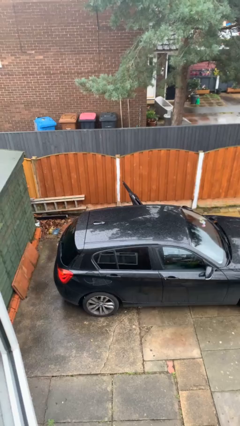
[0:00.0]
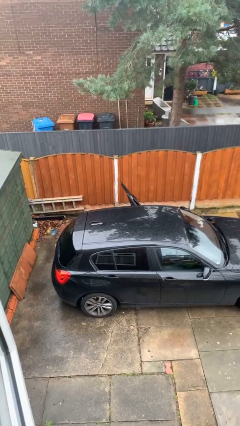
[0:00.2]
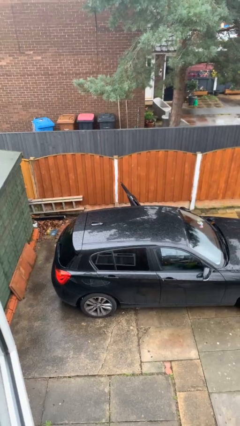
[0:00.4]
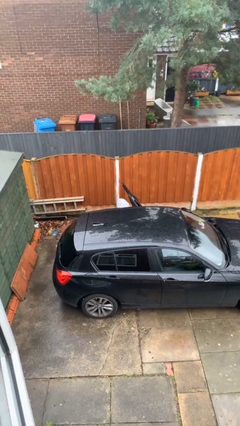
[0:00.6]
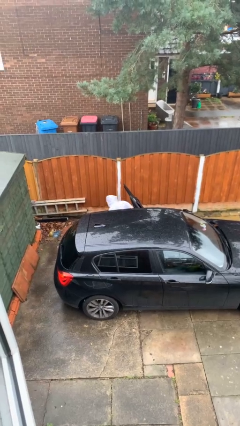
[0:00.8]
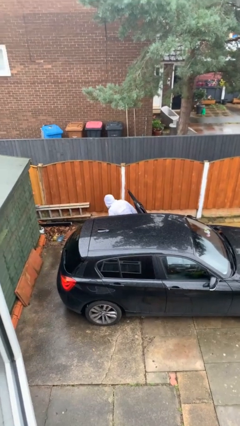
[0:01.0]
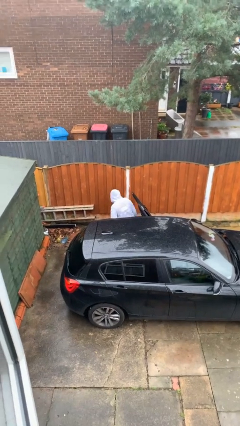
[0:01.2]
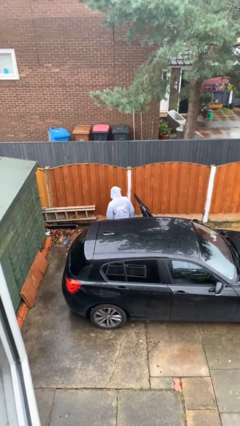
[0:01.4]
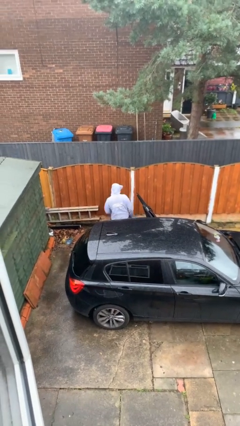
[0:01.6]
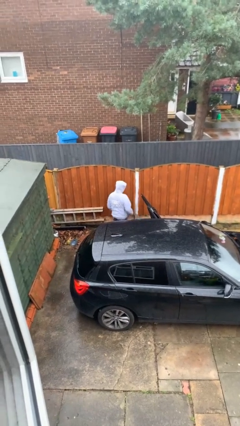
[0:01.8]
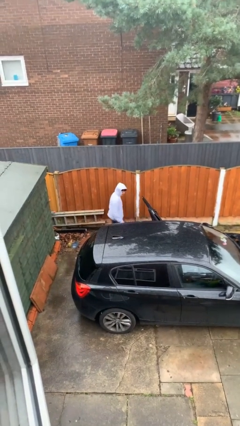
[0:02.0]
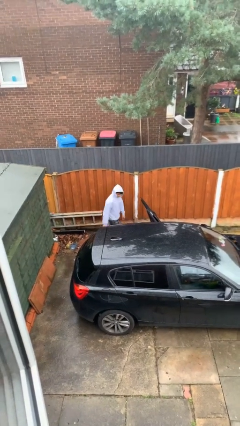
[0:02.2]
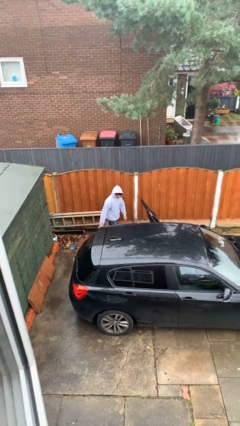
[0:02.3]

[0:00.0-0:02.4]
person exits car

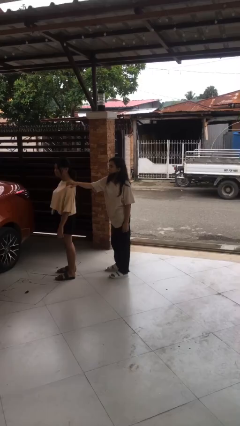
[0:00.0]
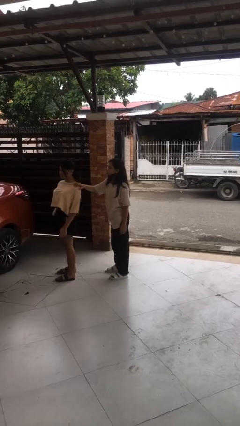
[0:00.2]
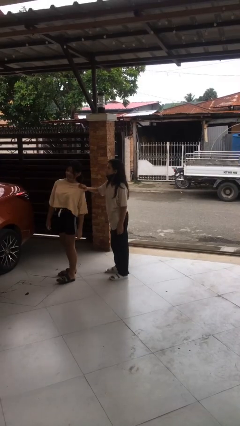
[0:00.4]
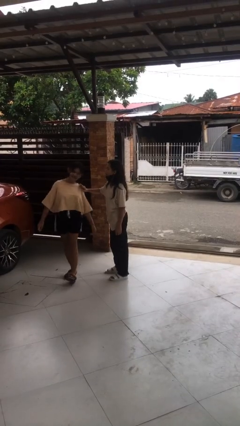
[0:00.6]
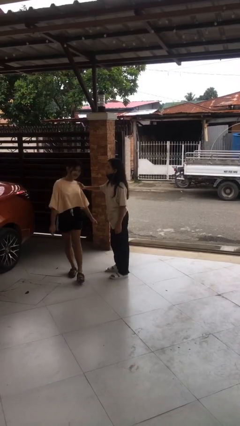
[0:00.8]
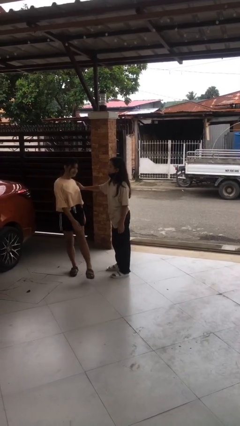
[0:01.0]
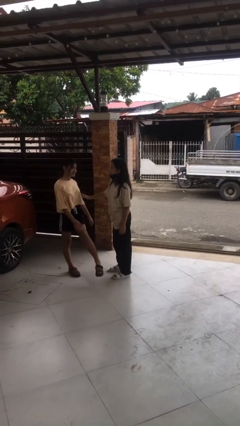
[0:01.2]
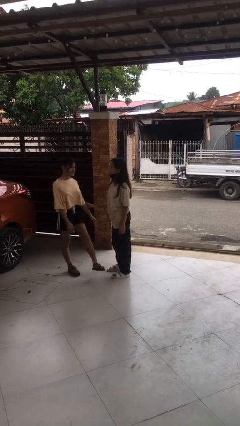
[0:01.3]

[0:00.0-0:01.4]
person spins person around

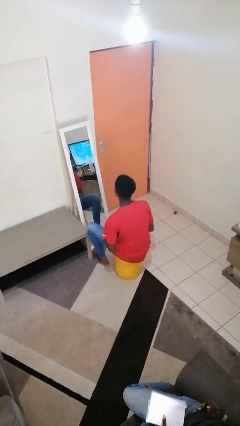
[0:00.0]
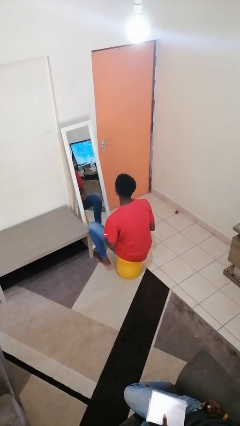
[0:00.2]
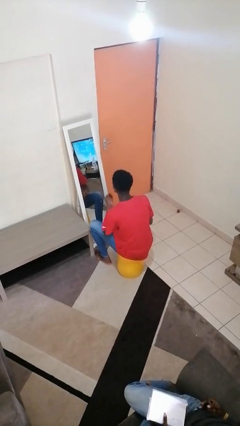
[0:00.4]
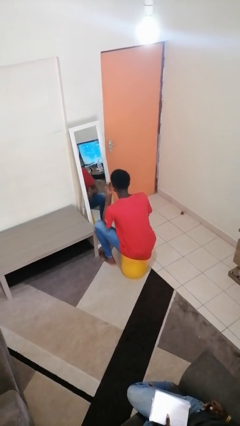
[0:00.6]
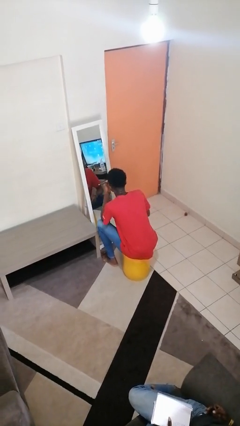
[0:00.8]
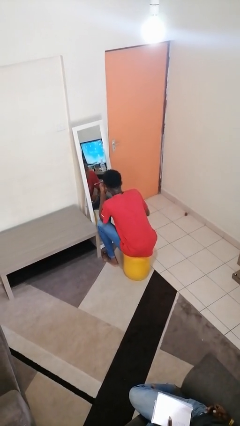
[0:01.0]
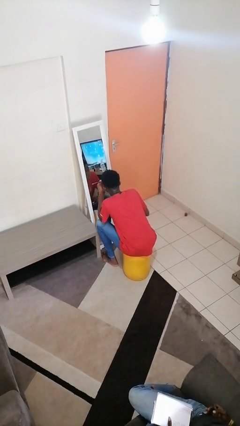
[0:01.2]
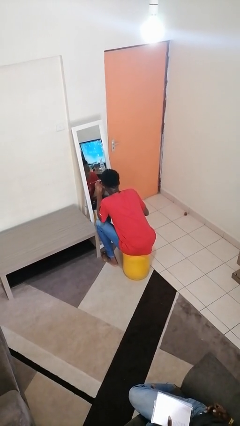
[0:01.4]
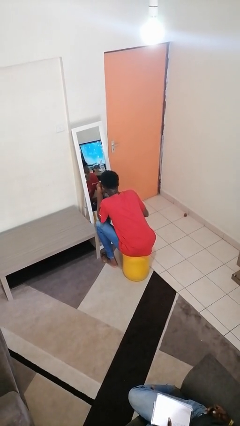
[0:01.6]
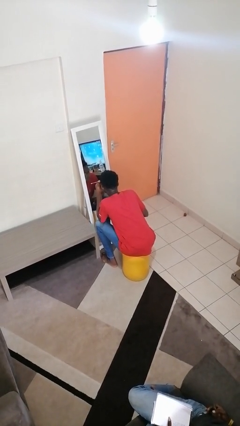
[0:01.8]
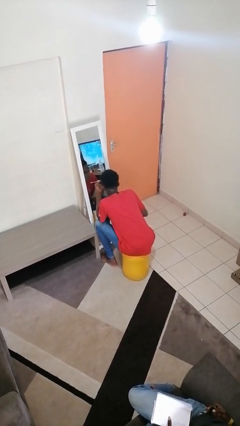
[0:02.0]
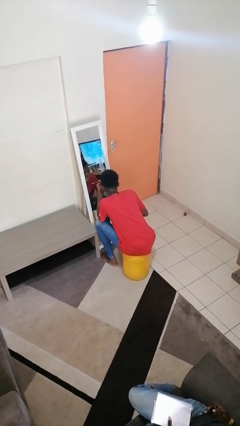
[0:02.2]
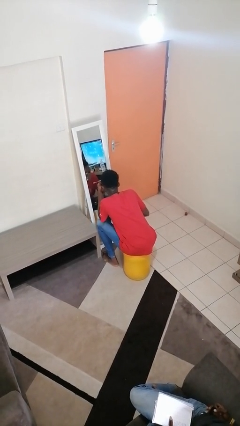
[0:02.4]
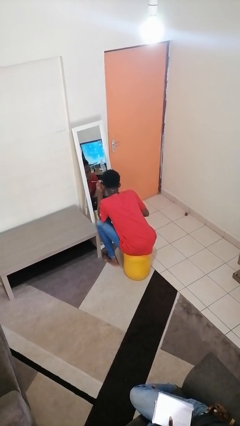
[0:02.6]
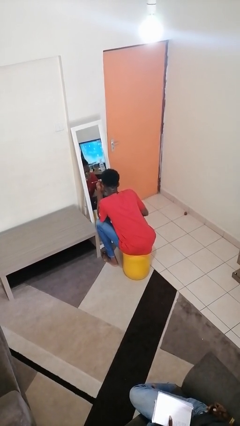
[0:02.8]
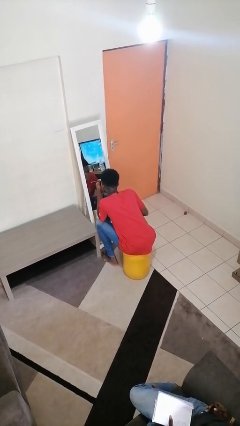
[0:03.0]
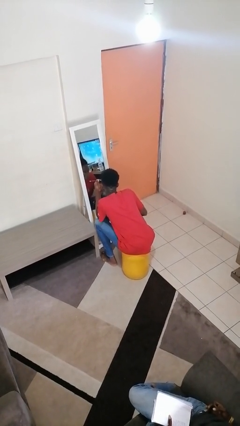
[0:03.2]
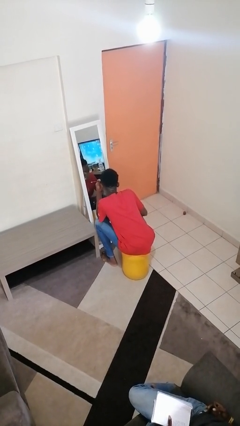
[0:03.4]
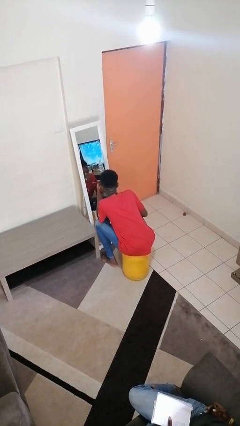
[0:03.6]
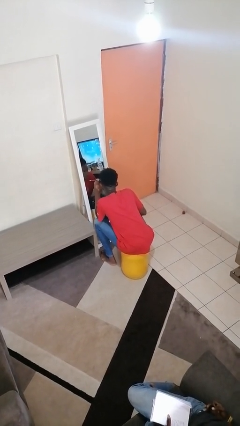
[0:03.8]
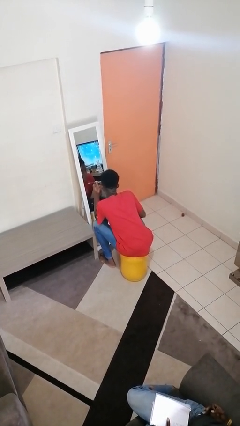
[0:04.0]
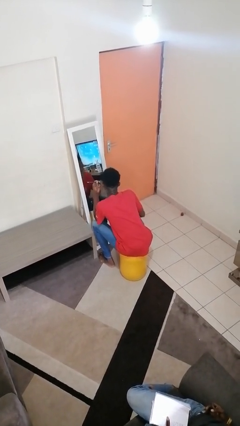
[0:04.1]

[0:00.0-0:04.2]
person applies eye makeup

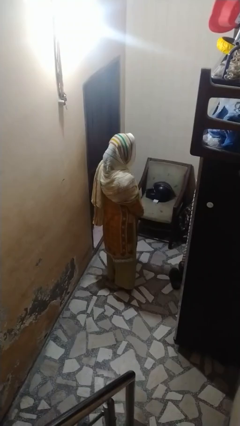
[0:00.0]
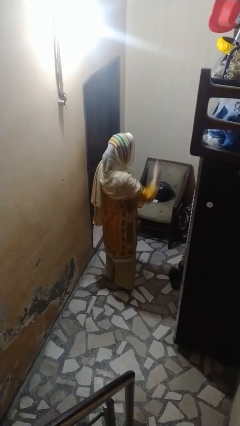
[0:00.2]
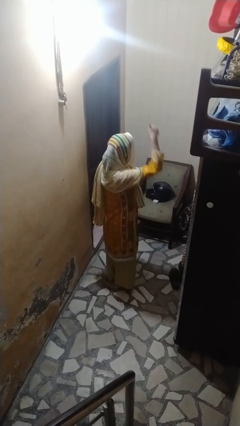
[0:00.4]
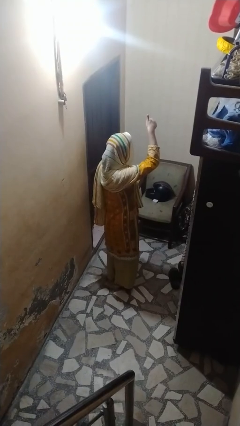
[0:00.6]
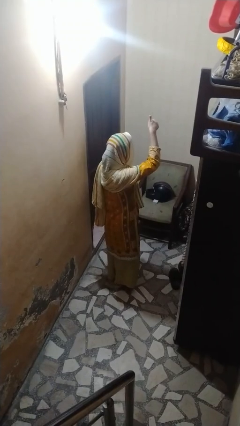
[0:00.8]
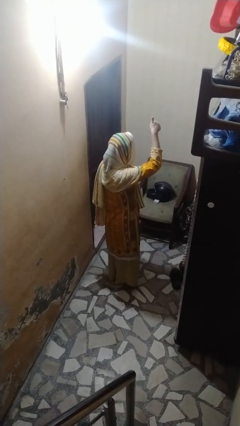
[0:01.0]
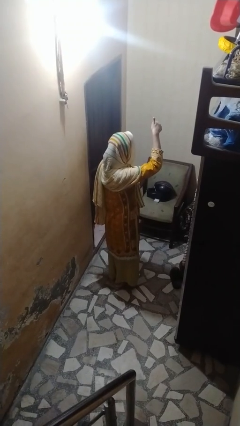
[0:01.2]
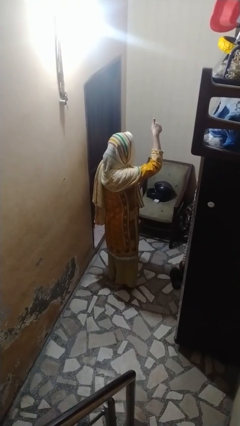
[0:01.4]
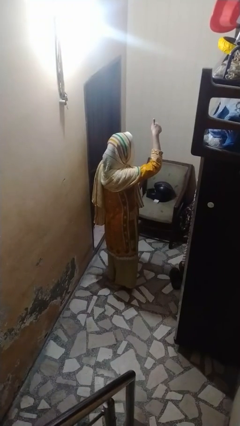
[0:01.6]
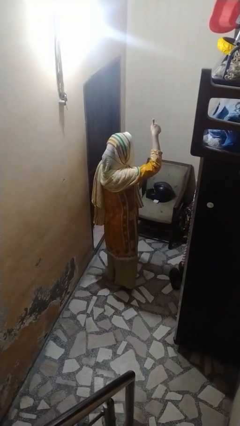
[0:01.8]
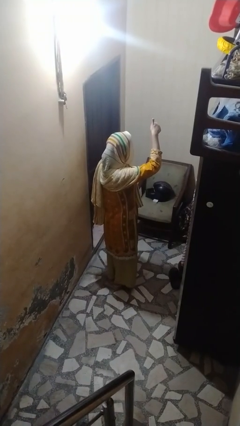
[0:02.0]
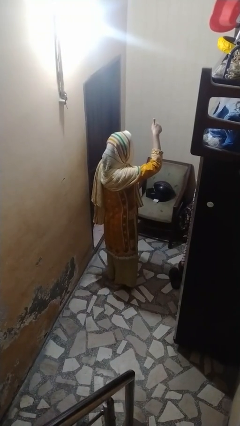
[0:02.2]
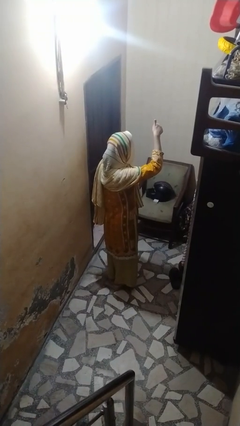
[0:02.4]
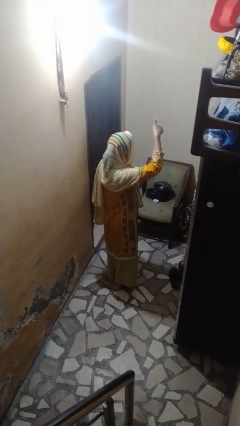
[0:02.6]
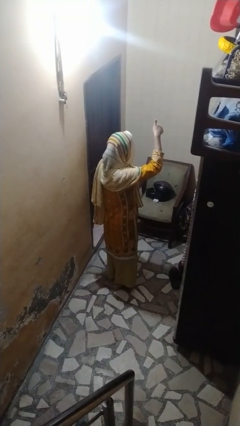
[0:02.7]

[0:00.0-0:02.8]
person gestures thumbs up

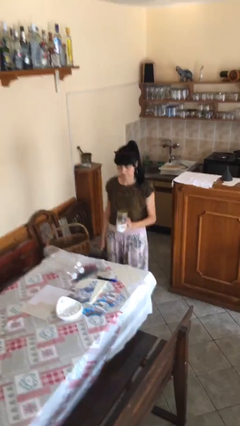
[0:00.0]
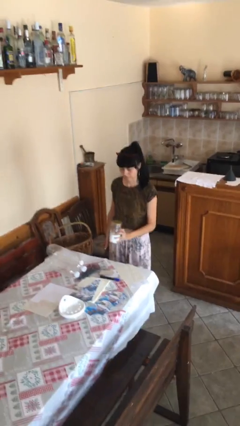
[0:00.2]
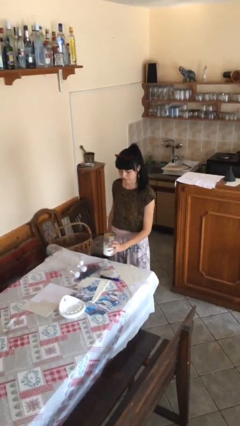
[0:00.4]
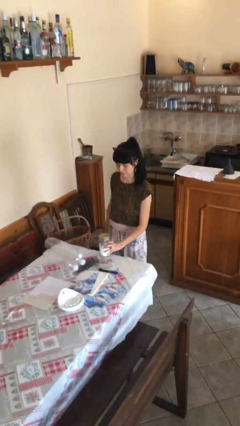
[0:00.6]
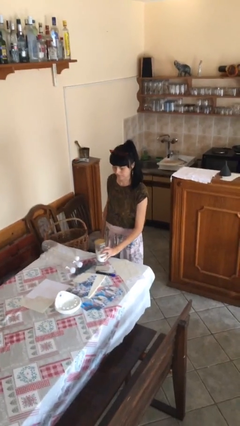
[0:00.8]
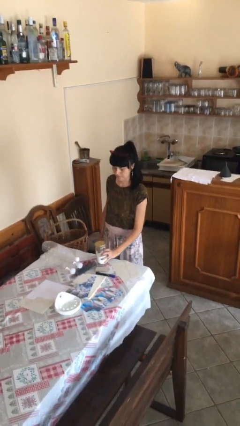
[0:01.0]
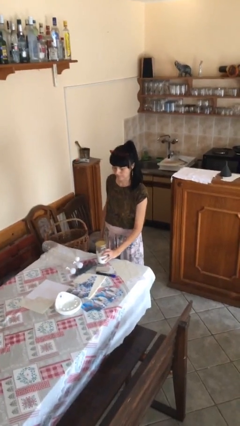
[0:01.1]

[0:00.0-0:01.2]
person puts down object on table

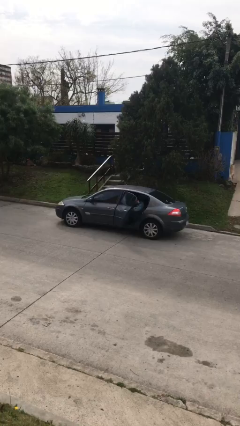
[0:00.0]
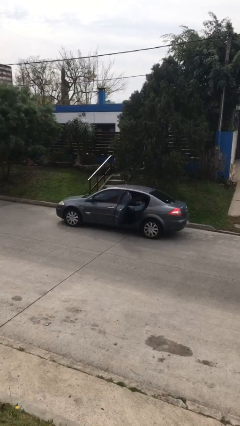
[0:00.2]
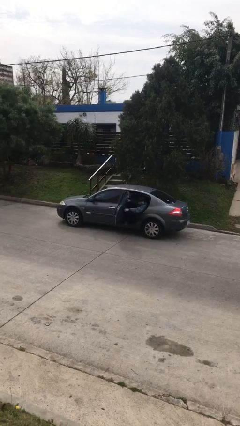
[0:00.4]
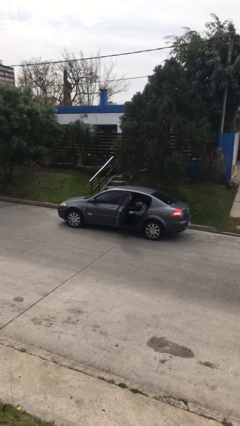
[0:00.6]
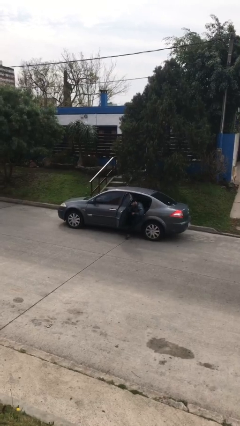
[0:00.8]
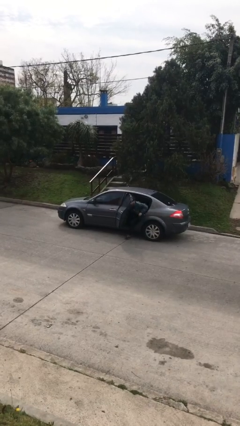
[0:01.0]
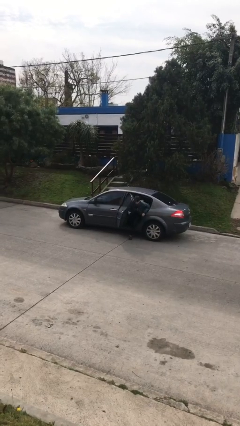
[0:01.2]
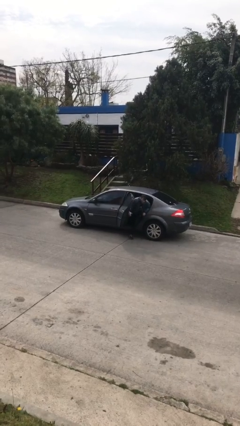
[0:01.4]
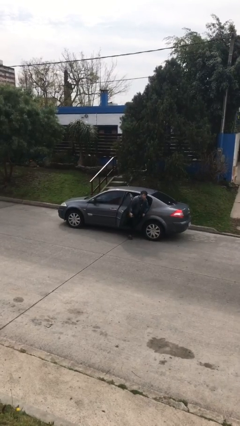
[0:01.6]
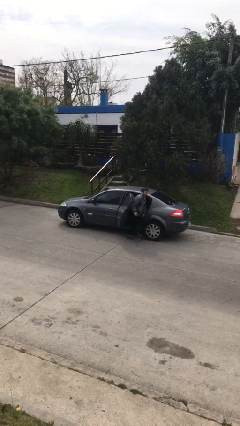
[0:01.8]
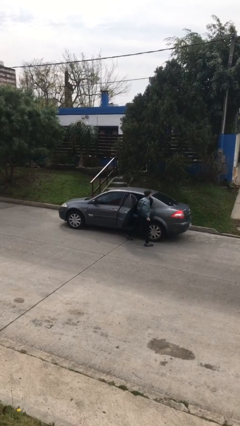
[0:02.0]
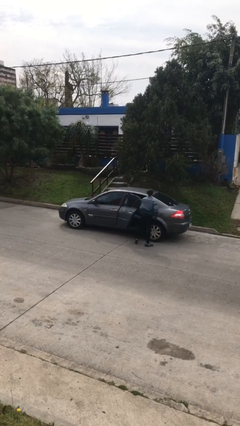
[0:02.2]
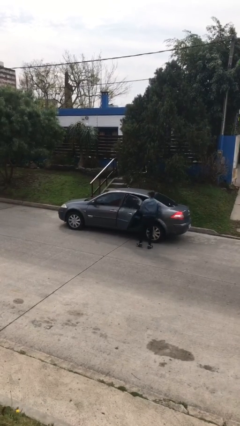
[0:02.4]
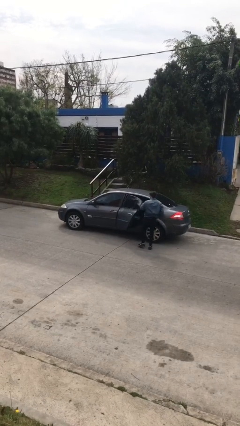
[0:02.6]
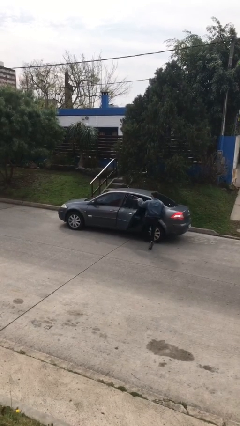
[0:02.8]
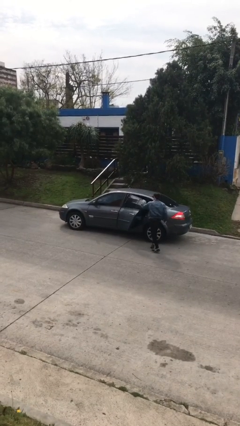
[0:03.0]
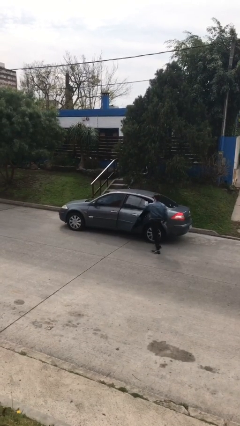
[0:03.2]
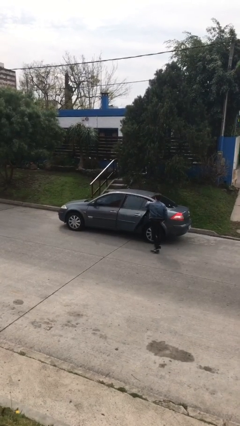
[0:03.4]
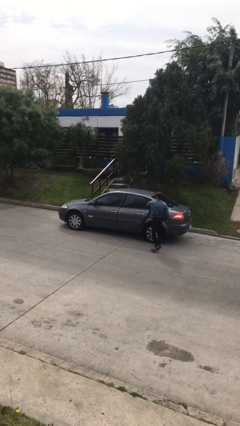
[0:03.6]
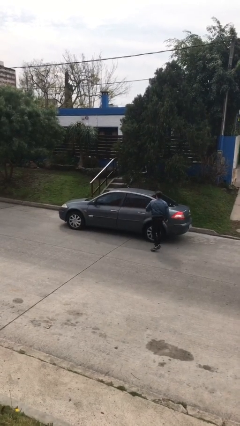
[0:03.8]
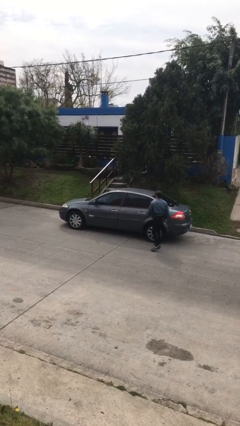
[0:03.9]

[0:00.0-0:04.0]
car drops off person

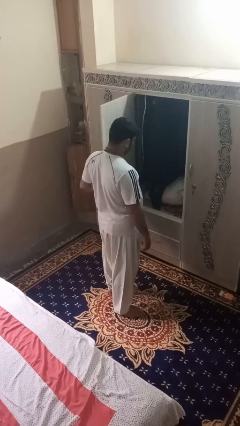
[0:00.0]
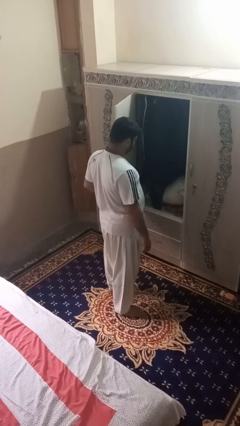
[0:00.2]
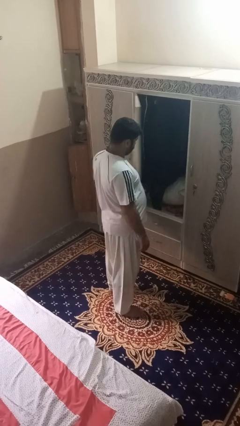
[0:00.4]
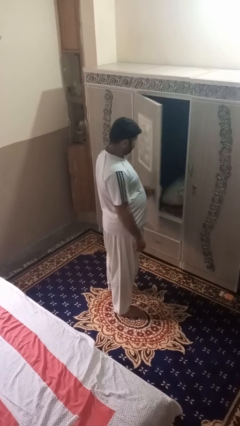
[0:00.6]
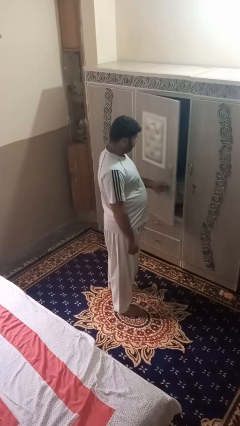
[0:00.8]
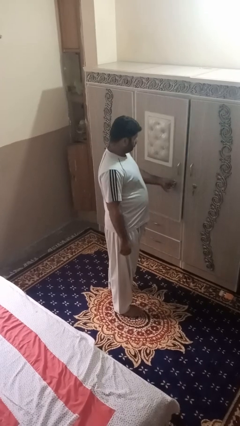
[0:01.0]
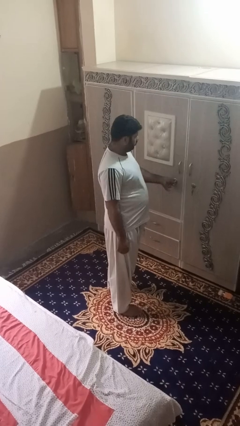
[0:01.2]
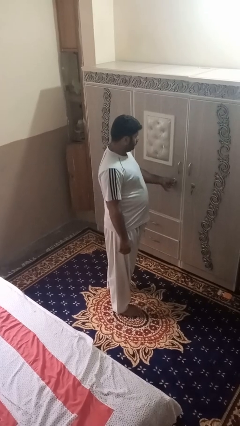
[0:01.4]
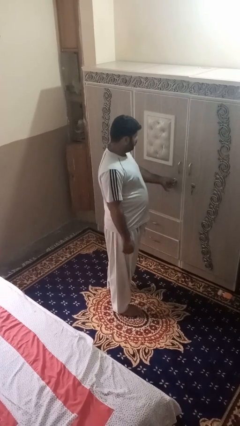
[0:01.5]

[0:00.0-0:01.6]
person closes dresser drawer
